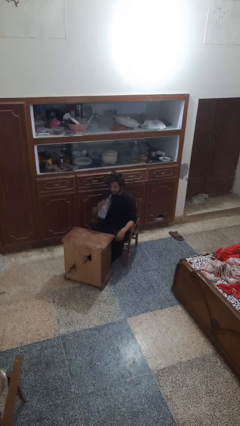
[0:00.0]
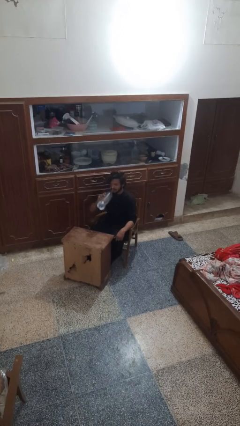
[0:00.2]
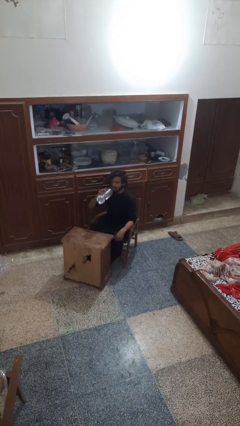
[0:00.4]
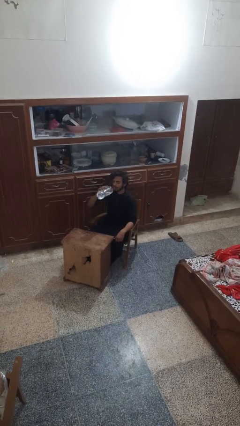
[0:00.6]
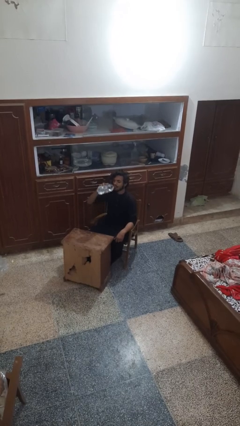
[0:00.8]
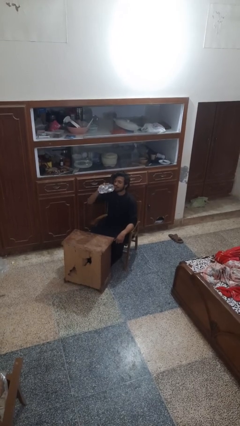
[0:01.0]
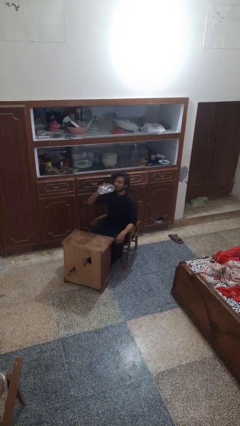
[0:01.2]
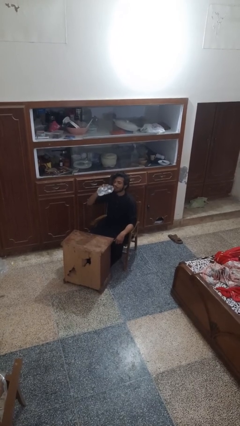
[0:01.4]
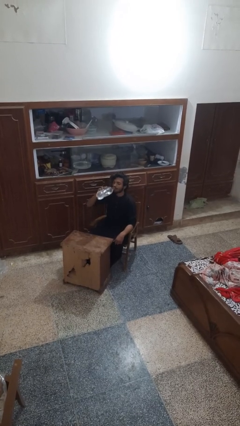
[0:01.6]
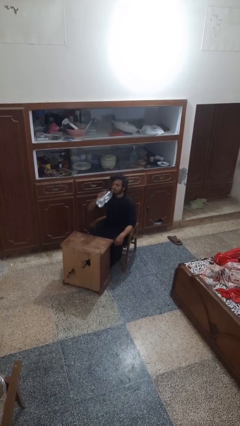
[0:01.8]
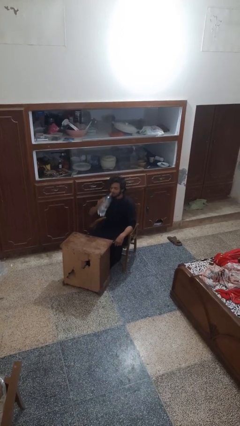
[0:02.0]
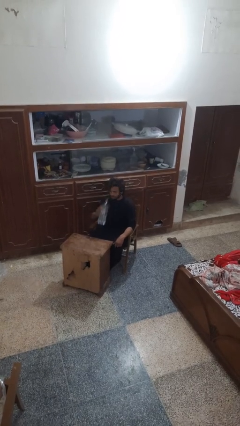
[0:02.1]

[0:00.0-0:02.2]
person drinks from bottle

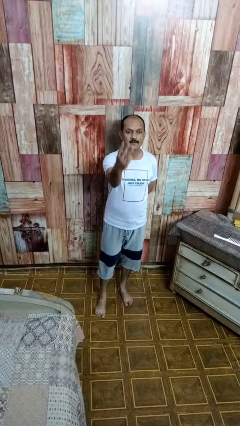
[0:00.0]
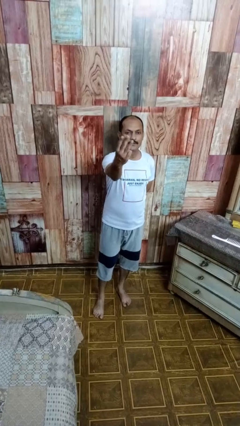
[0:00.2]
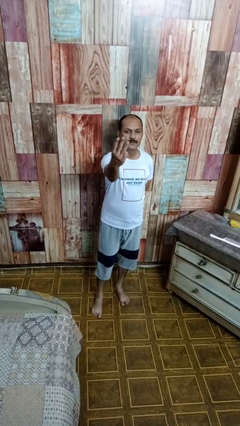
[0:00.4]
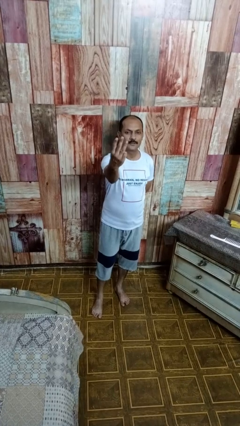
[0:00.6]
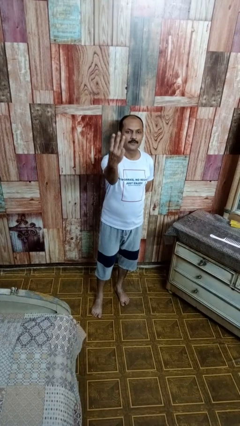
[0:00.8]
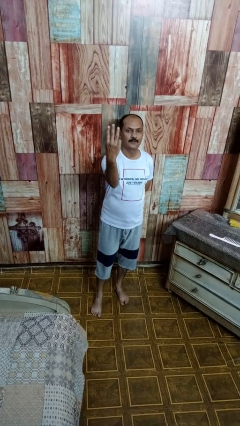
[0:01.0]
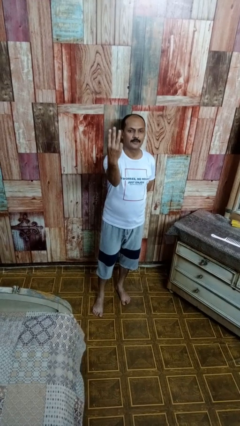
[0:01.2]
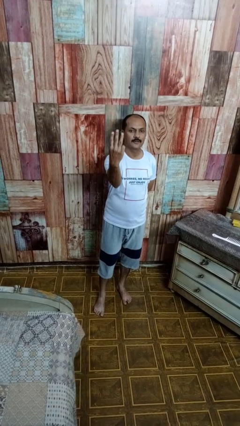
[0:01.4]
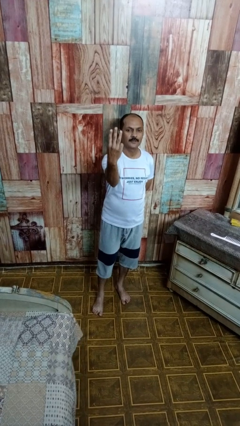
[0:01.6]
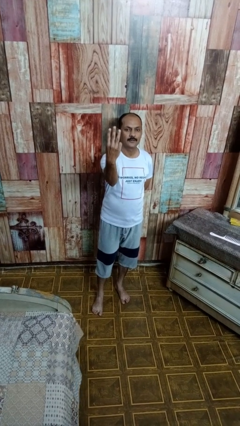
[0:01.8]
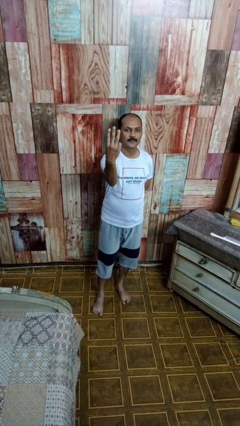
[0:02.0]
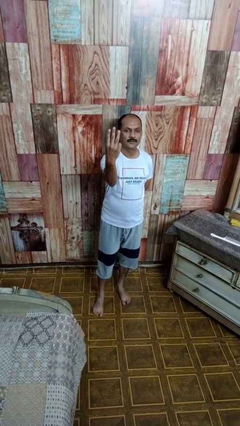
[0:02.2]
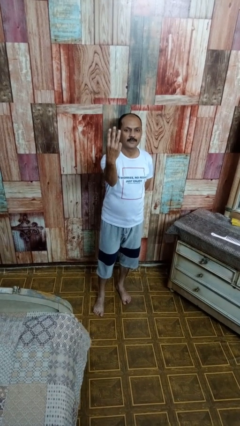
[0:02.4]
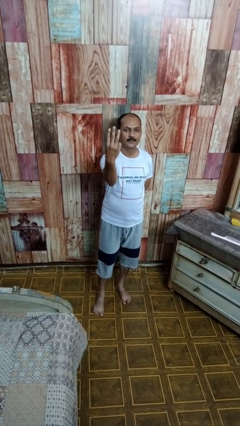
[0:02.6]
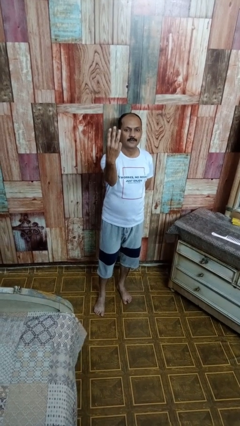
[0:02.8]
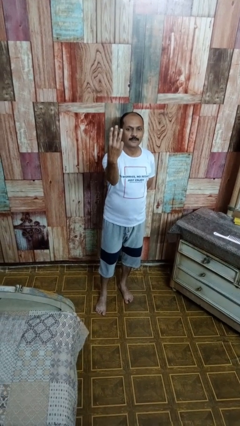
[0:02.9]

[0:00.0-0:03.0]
person gestures number three

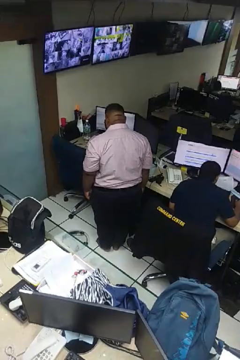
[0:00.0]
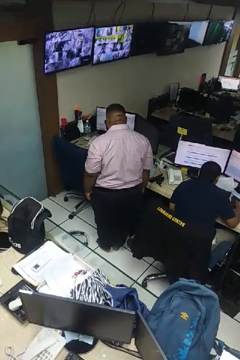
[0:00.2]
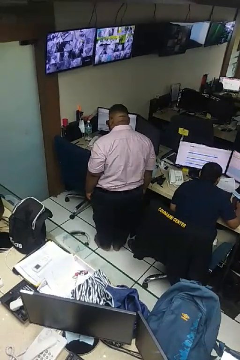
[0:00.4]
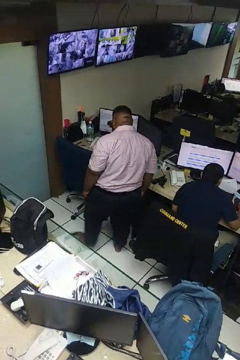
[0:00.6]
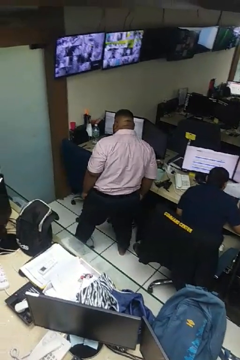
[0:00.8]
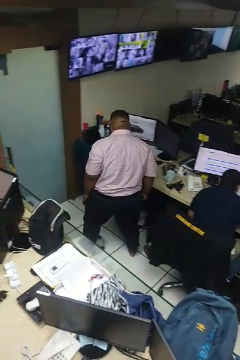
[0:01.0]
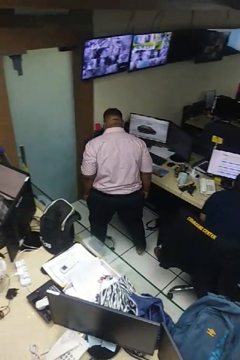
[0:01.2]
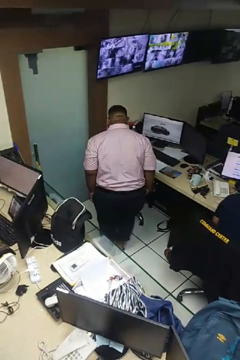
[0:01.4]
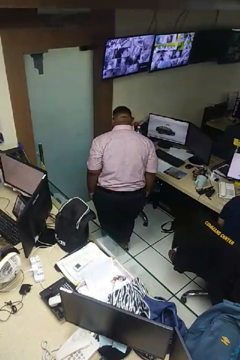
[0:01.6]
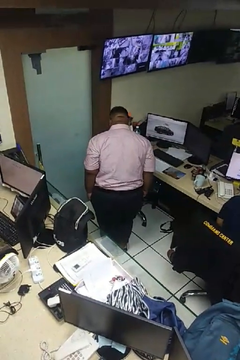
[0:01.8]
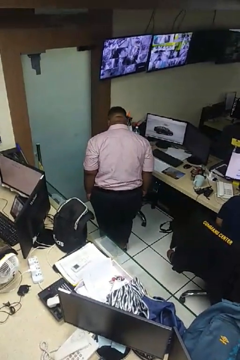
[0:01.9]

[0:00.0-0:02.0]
person uses bodyweight scale

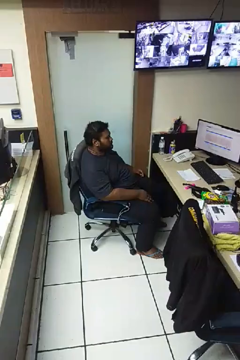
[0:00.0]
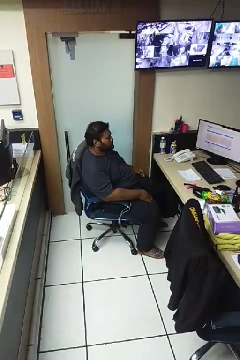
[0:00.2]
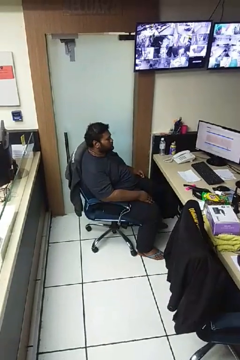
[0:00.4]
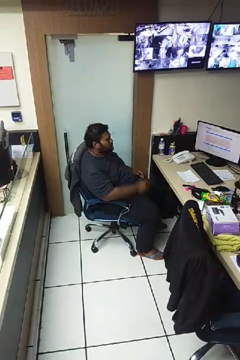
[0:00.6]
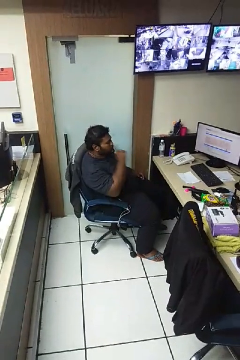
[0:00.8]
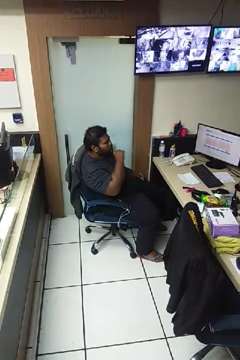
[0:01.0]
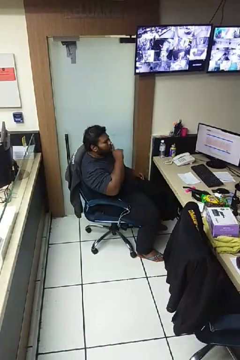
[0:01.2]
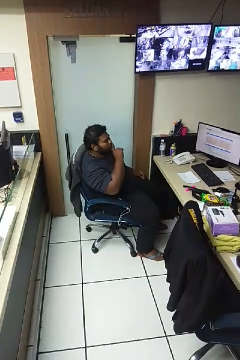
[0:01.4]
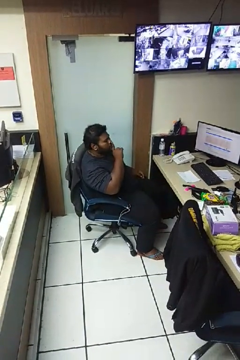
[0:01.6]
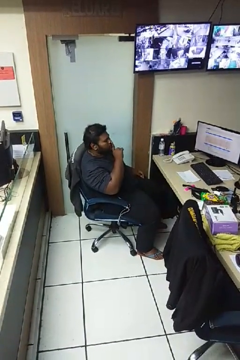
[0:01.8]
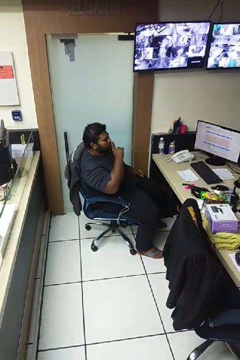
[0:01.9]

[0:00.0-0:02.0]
person gestures be quiet

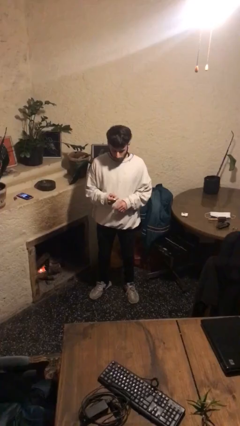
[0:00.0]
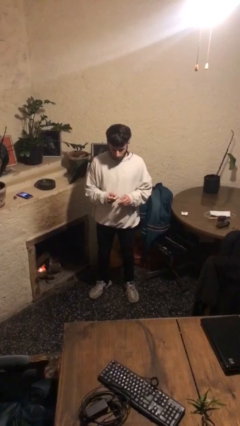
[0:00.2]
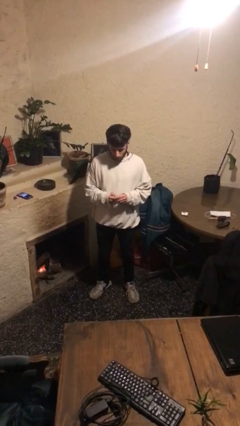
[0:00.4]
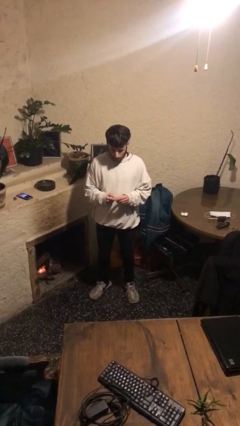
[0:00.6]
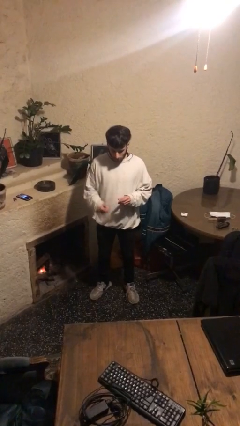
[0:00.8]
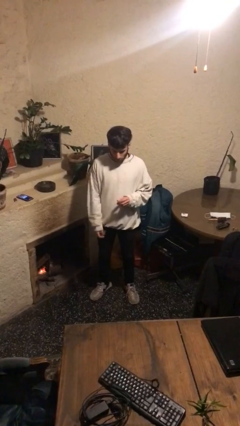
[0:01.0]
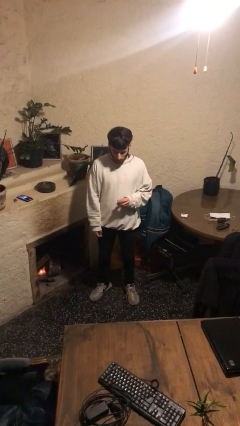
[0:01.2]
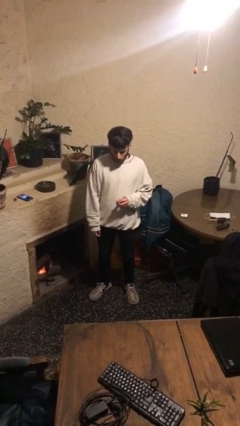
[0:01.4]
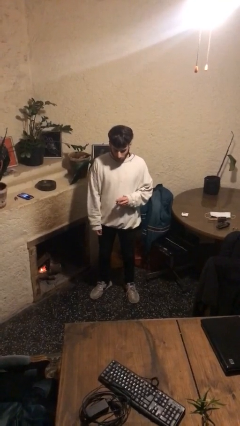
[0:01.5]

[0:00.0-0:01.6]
person takes off ring

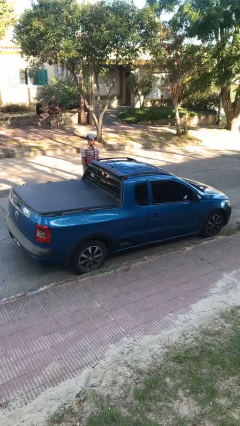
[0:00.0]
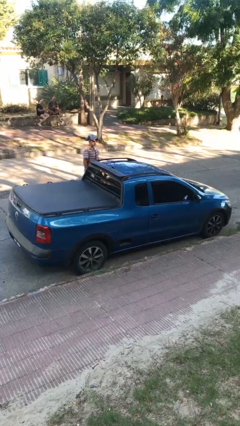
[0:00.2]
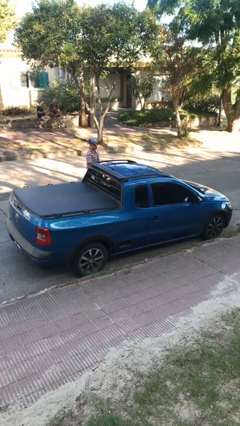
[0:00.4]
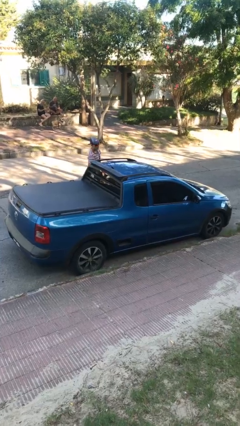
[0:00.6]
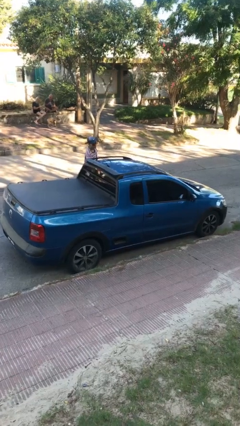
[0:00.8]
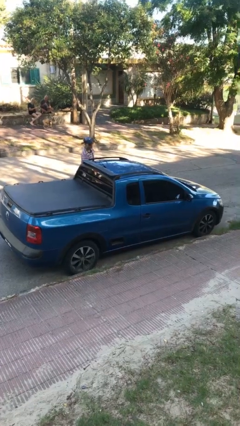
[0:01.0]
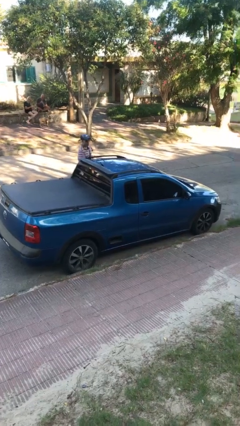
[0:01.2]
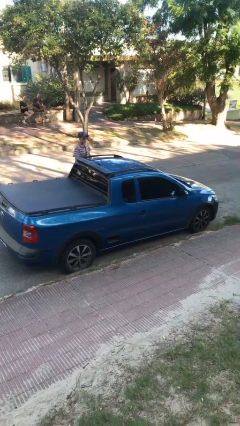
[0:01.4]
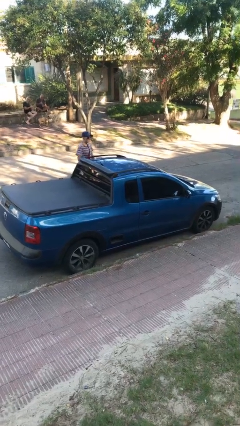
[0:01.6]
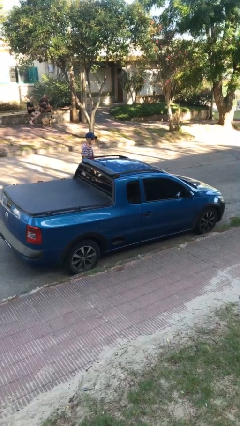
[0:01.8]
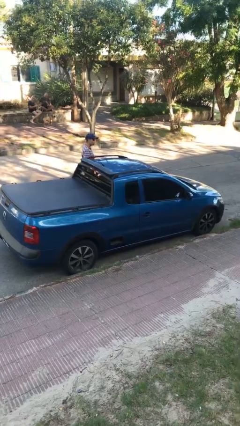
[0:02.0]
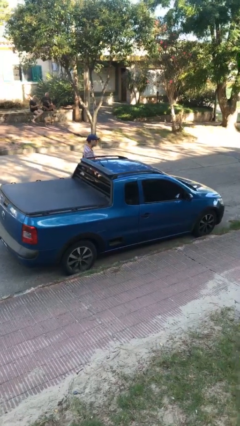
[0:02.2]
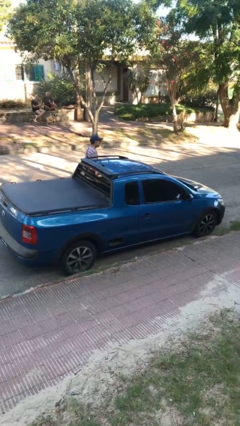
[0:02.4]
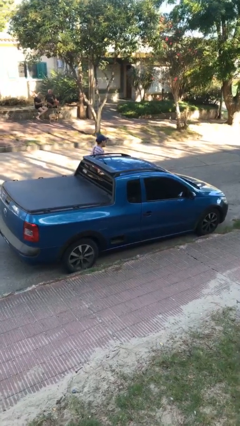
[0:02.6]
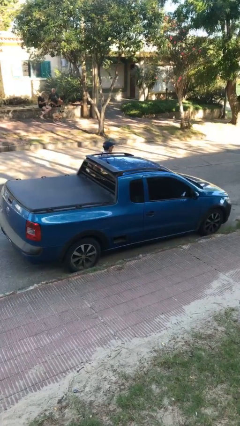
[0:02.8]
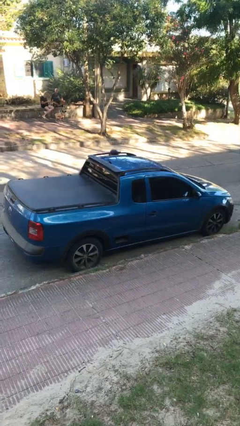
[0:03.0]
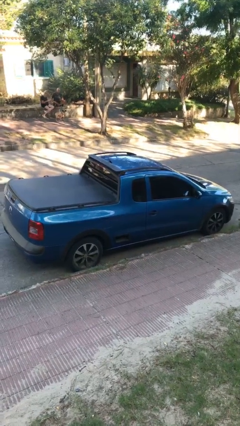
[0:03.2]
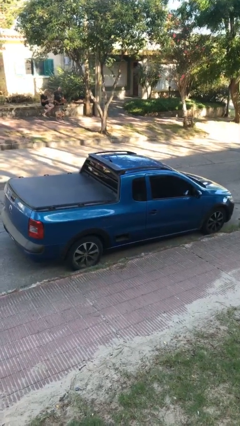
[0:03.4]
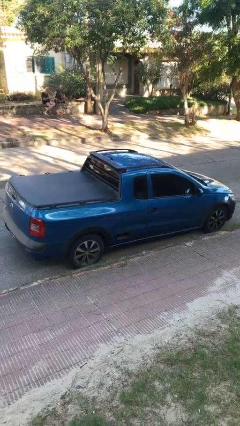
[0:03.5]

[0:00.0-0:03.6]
car picks up person

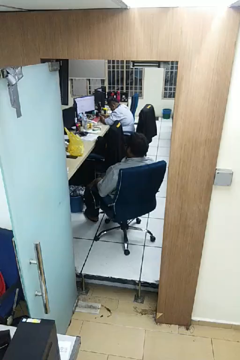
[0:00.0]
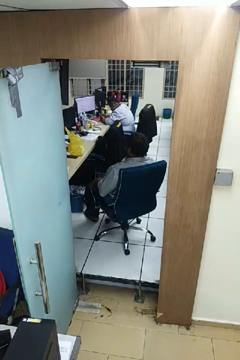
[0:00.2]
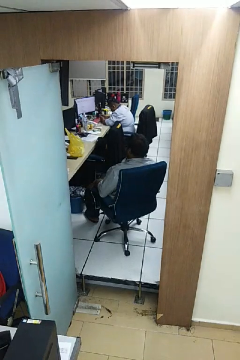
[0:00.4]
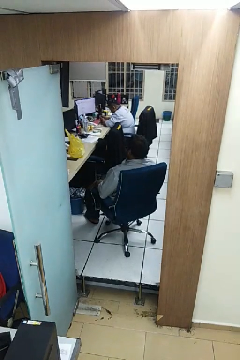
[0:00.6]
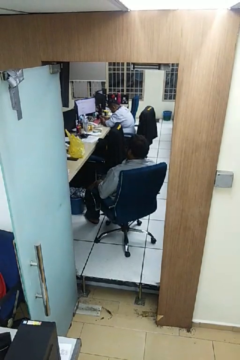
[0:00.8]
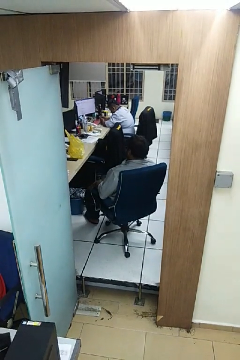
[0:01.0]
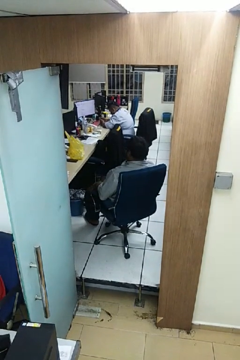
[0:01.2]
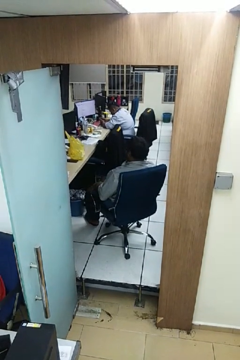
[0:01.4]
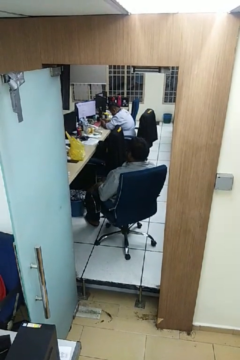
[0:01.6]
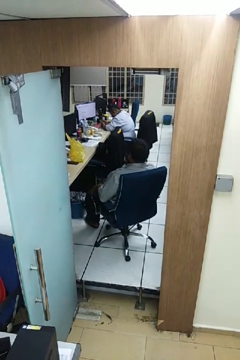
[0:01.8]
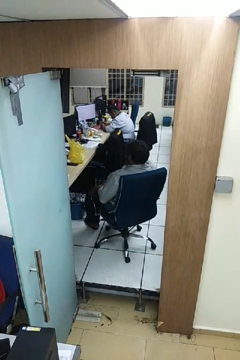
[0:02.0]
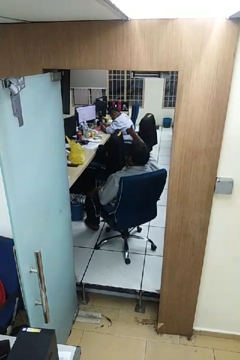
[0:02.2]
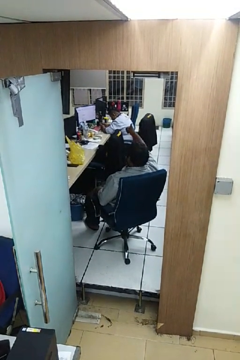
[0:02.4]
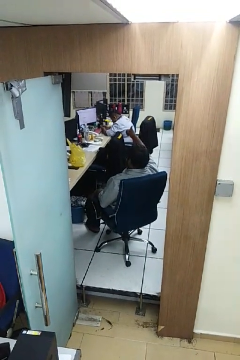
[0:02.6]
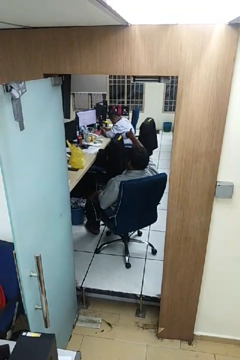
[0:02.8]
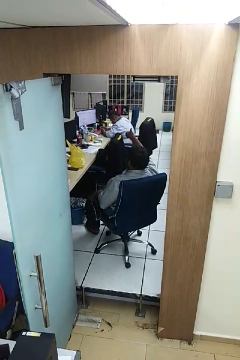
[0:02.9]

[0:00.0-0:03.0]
person gestures thumbs up

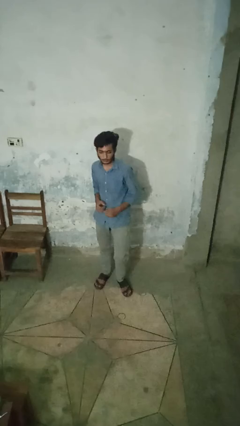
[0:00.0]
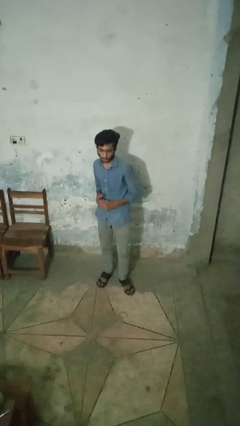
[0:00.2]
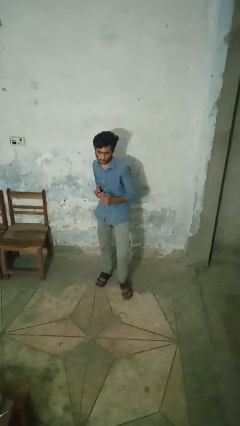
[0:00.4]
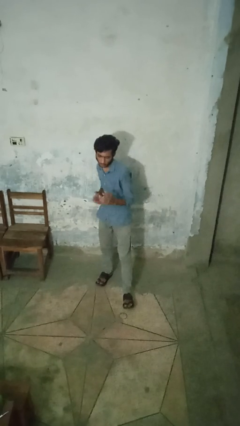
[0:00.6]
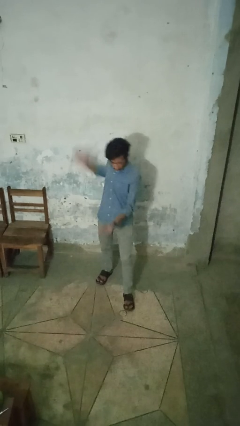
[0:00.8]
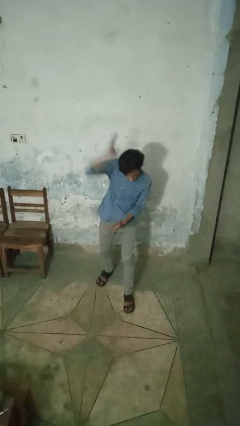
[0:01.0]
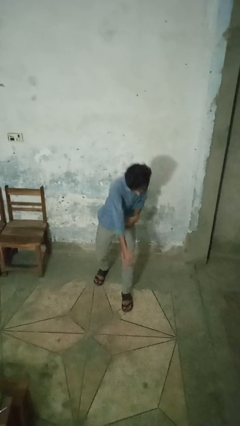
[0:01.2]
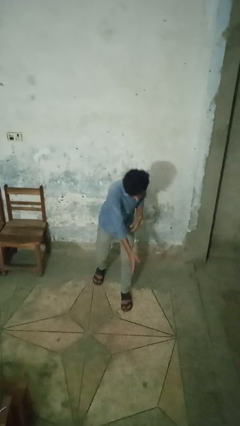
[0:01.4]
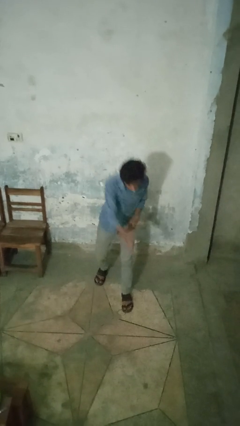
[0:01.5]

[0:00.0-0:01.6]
person karate chop
